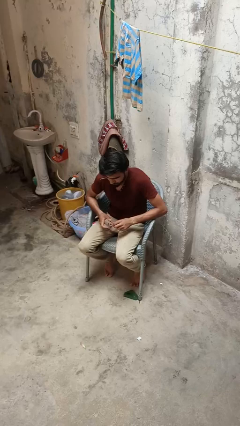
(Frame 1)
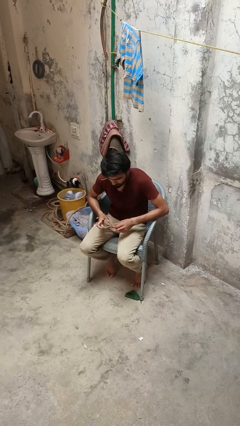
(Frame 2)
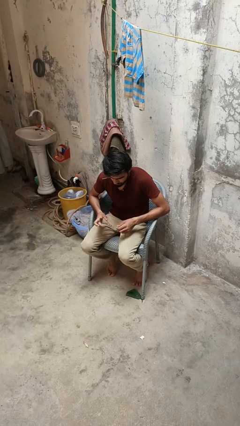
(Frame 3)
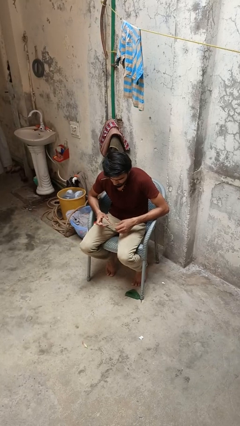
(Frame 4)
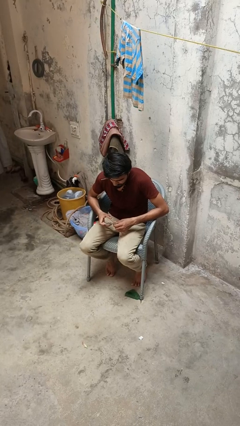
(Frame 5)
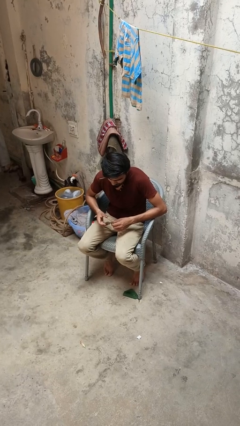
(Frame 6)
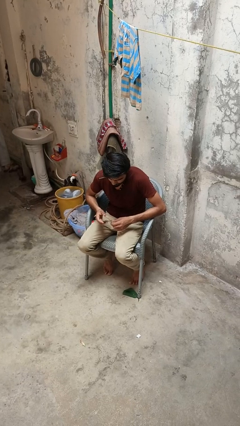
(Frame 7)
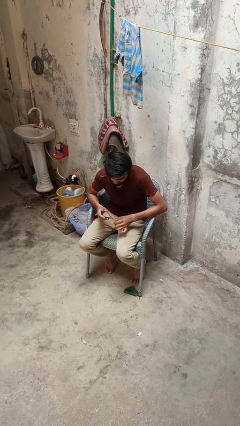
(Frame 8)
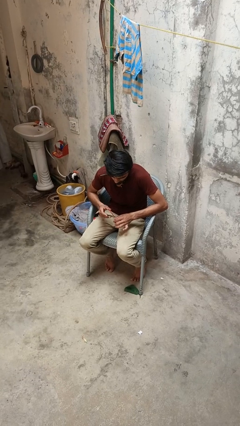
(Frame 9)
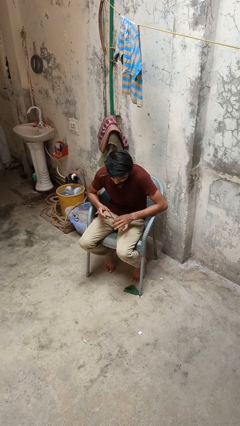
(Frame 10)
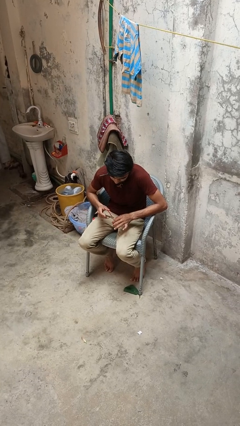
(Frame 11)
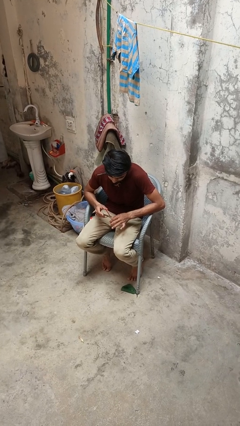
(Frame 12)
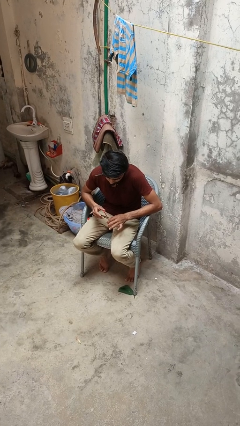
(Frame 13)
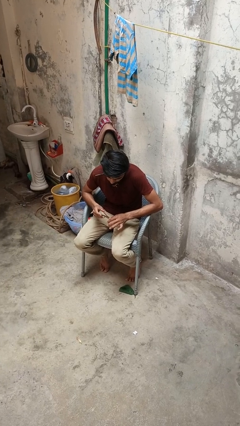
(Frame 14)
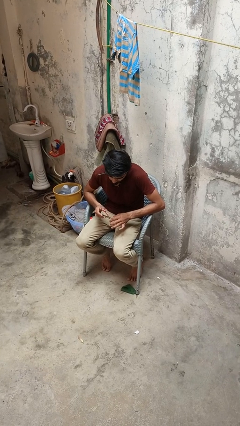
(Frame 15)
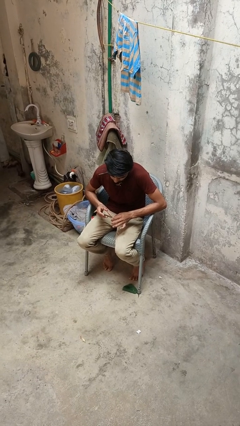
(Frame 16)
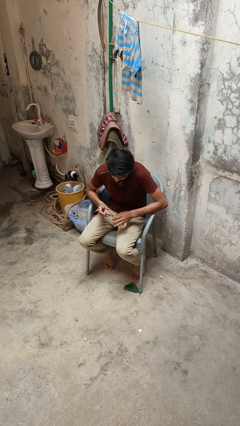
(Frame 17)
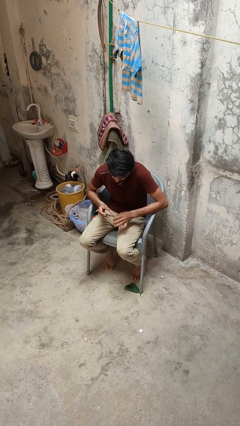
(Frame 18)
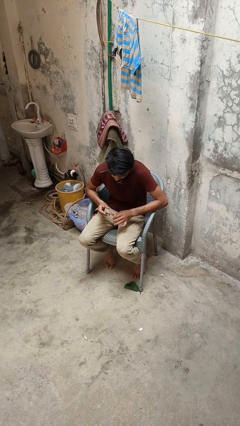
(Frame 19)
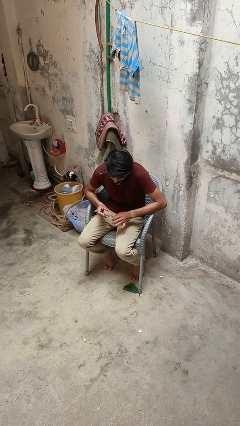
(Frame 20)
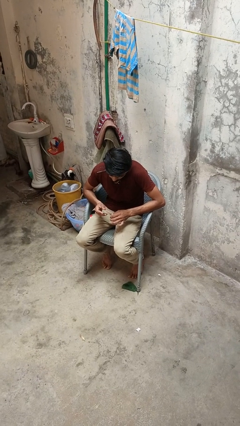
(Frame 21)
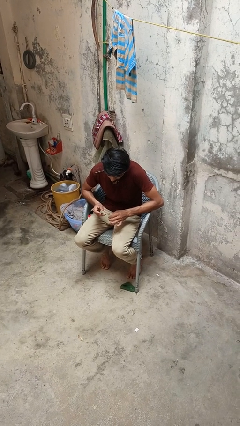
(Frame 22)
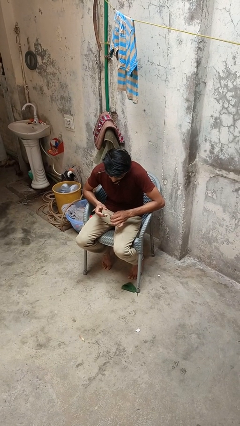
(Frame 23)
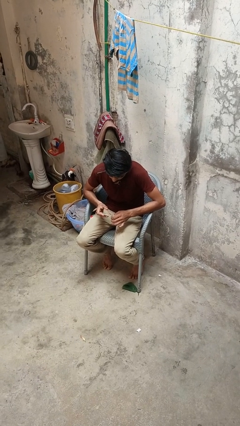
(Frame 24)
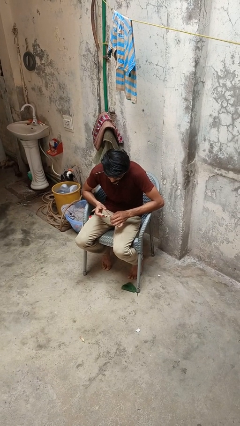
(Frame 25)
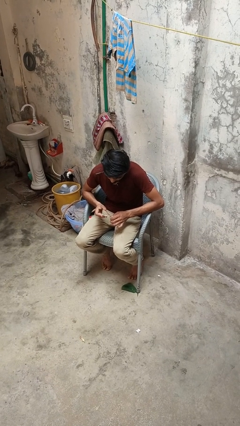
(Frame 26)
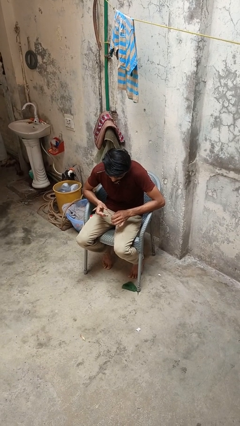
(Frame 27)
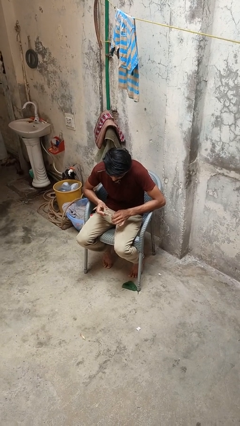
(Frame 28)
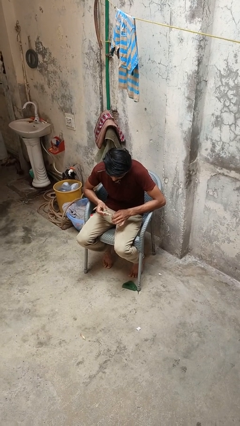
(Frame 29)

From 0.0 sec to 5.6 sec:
person clips fingernails

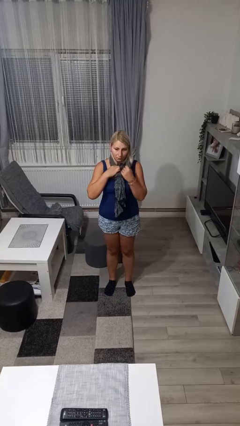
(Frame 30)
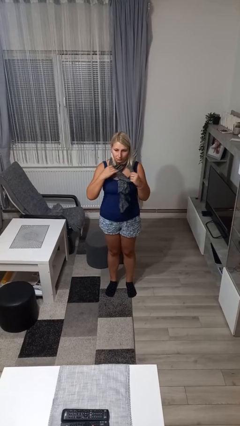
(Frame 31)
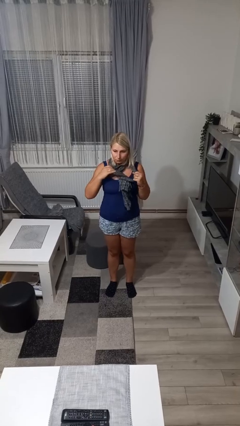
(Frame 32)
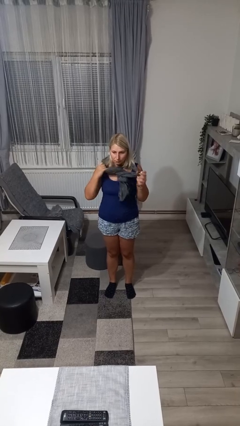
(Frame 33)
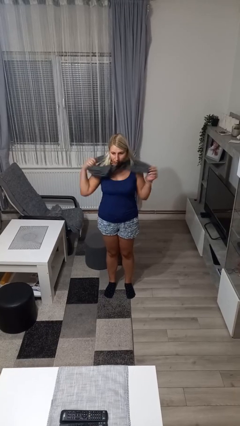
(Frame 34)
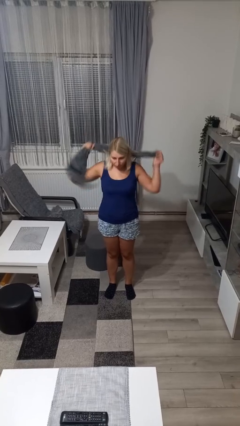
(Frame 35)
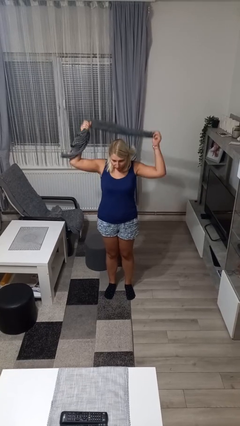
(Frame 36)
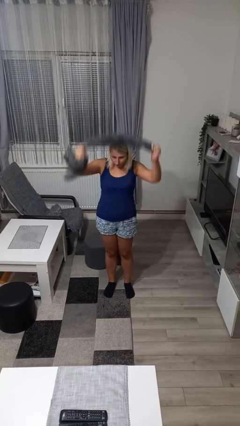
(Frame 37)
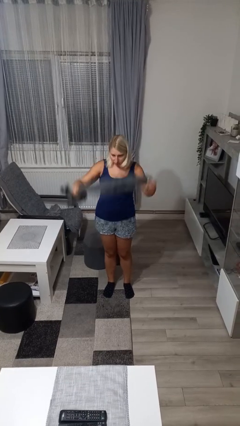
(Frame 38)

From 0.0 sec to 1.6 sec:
person takes off scarf

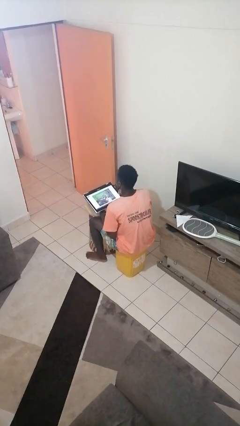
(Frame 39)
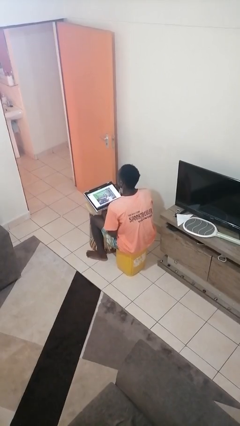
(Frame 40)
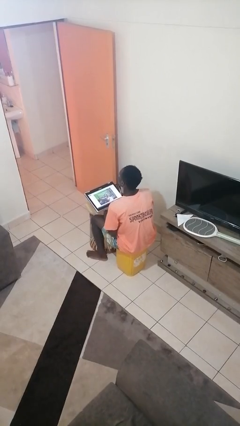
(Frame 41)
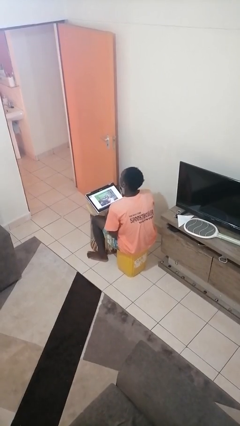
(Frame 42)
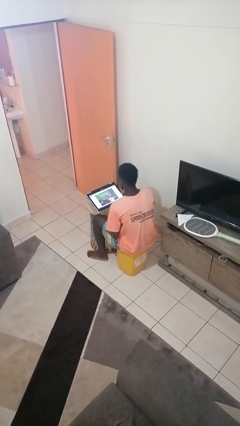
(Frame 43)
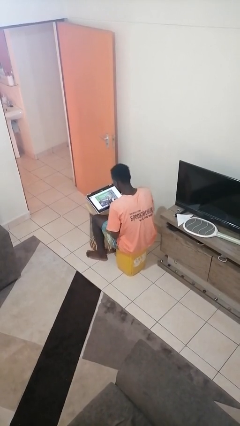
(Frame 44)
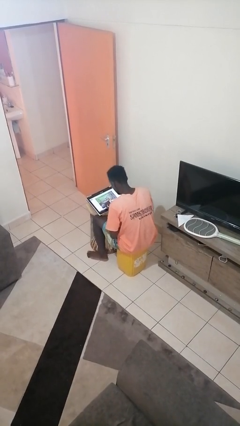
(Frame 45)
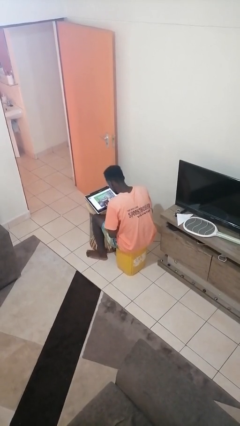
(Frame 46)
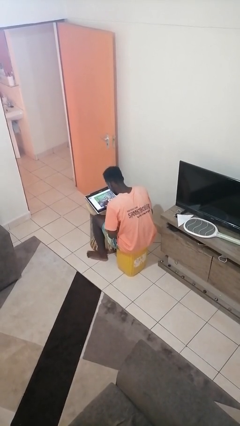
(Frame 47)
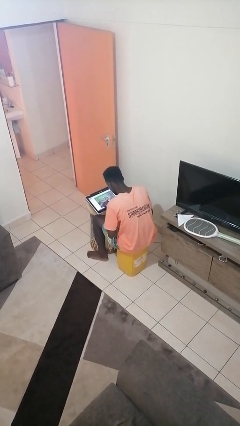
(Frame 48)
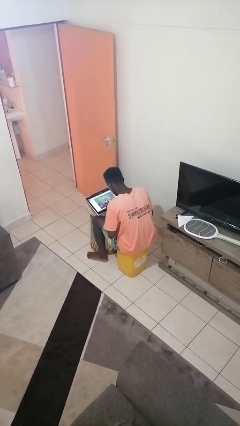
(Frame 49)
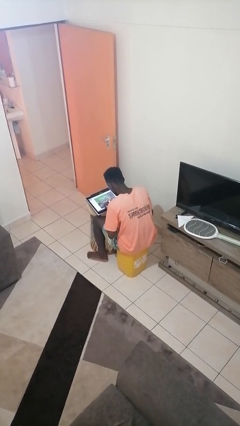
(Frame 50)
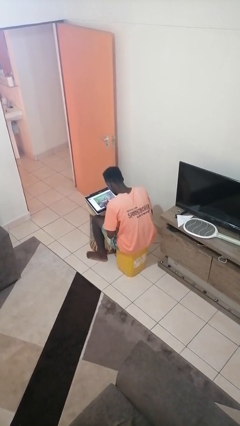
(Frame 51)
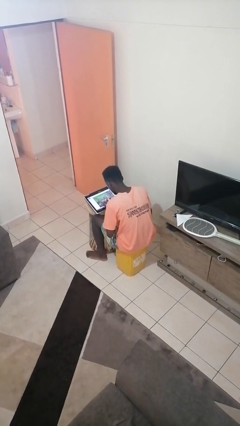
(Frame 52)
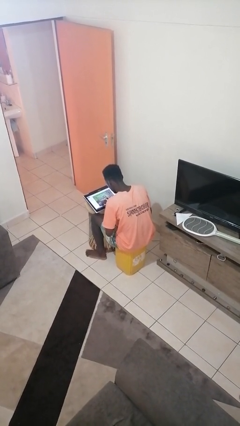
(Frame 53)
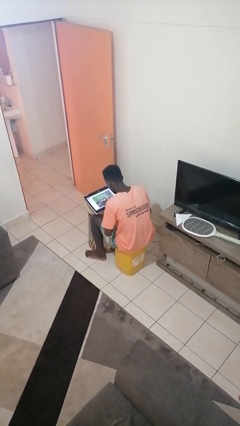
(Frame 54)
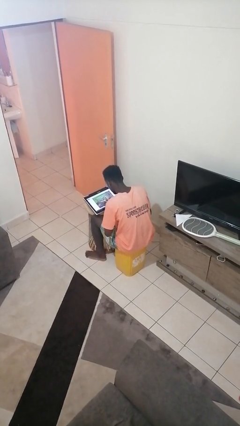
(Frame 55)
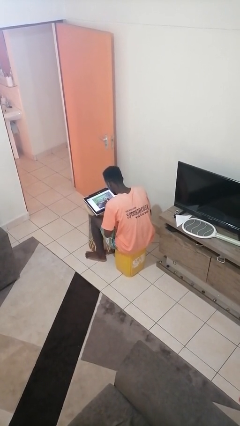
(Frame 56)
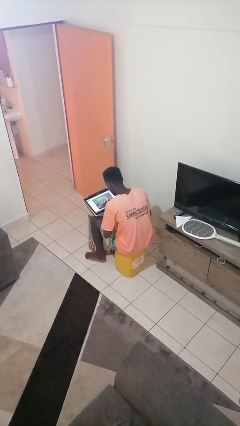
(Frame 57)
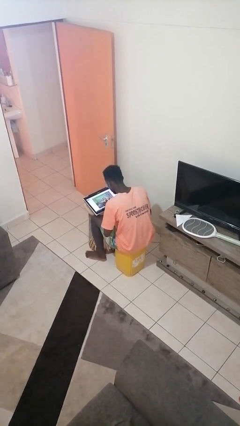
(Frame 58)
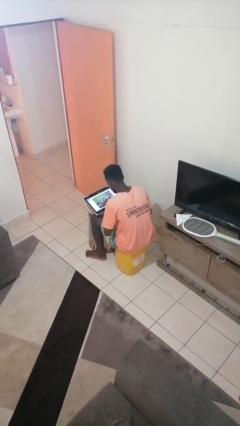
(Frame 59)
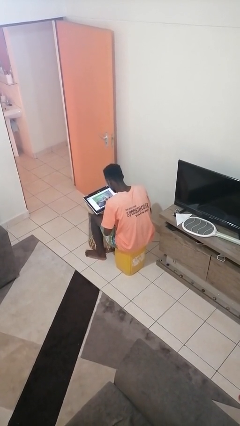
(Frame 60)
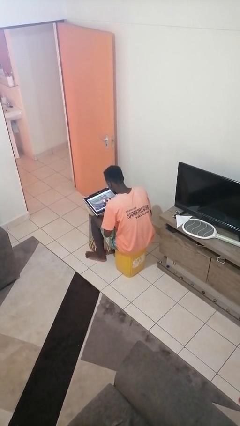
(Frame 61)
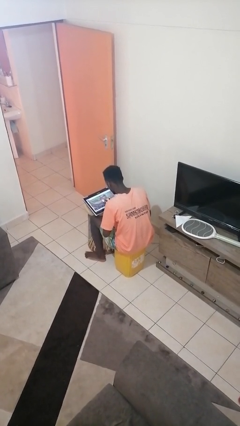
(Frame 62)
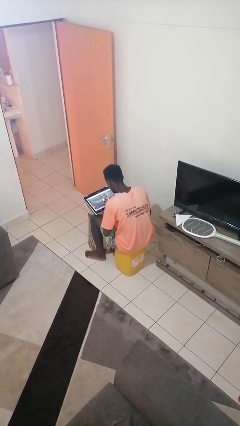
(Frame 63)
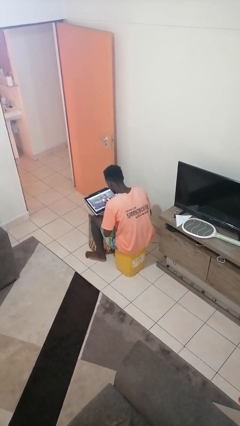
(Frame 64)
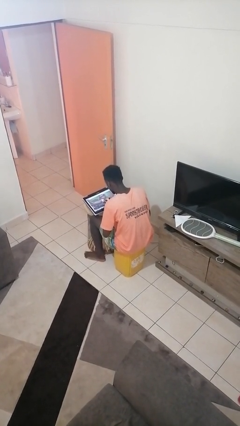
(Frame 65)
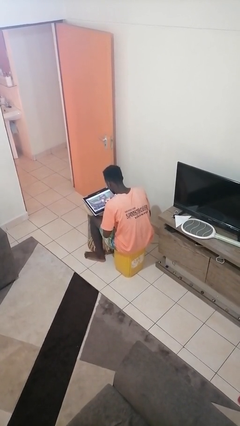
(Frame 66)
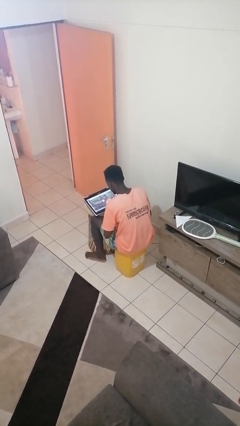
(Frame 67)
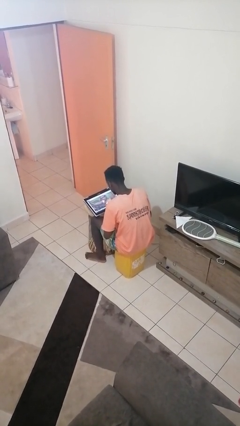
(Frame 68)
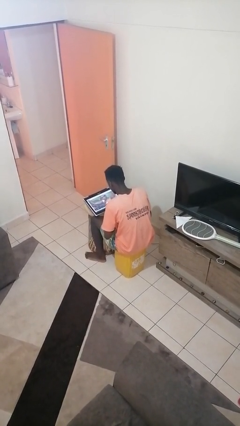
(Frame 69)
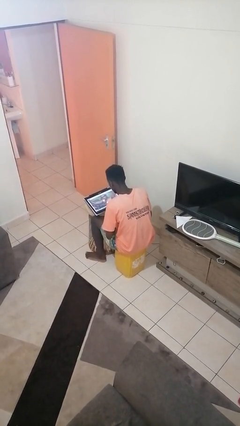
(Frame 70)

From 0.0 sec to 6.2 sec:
person interacts with tablet

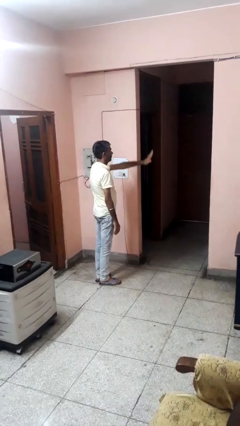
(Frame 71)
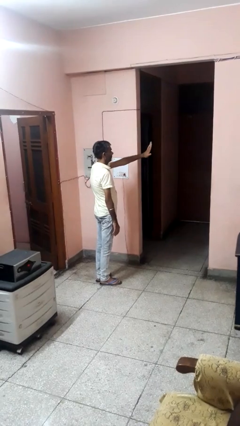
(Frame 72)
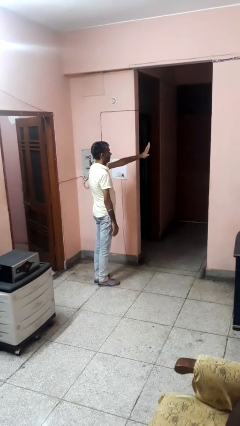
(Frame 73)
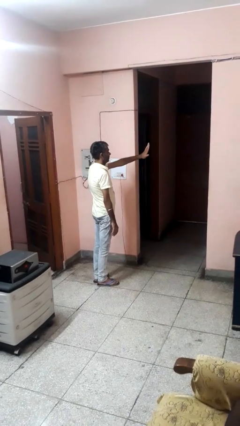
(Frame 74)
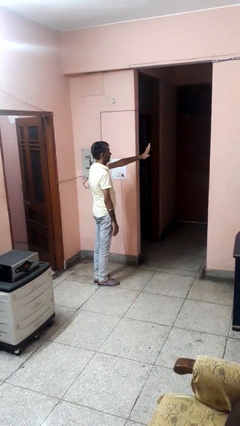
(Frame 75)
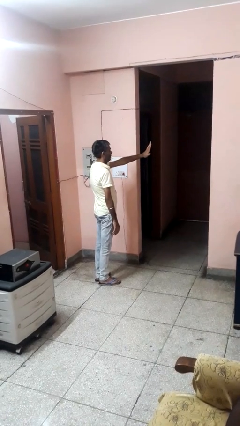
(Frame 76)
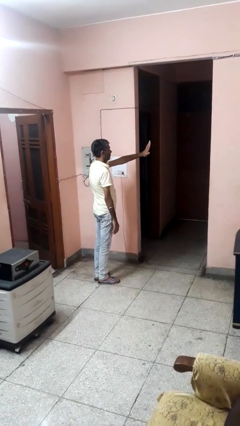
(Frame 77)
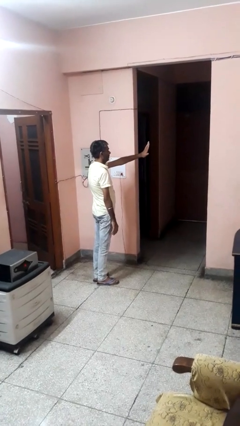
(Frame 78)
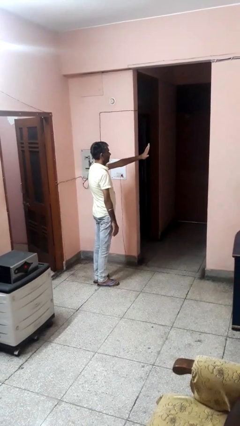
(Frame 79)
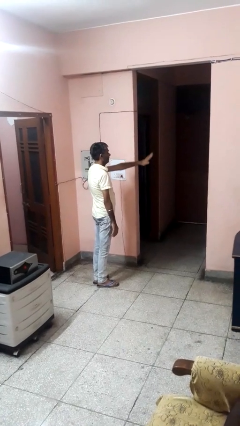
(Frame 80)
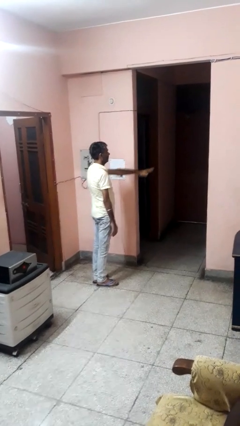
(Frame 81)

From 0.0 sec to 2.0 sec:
person gestures stop

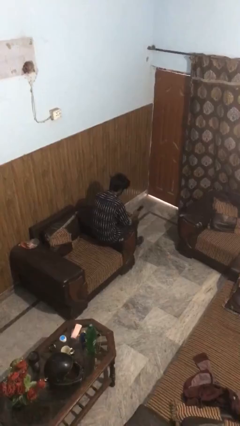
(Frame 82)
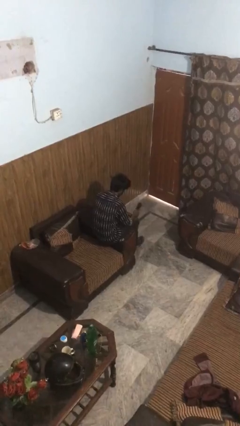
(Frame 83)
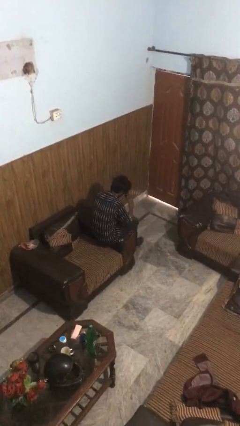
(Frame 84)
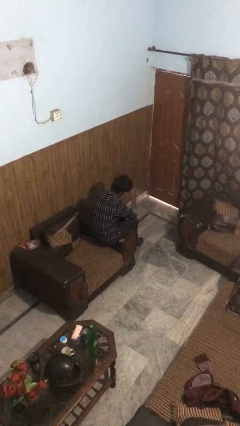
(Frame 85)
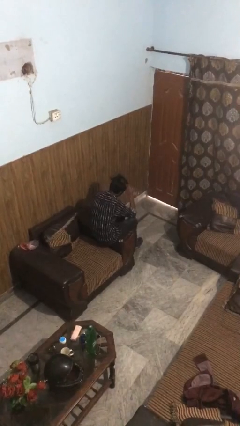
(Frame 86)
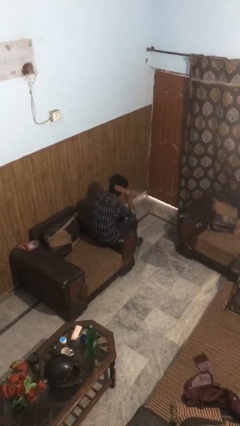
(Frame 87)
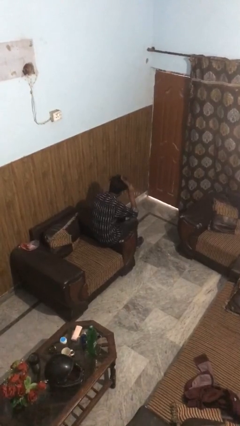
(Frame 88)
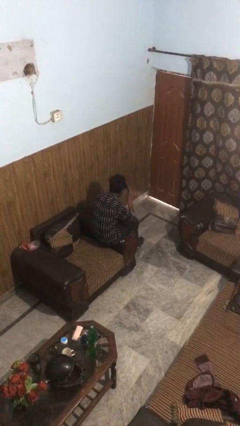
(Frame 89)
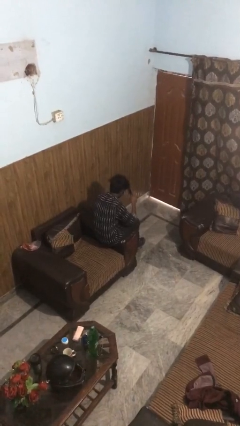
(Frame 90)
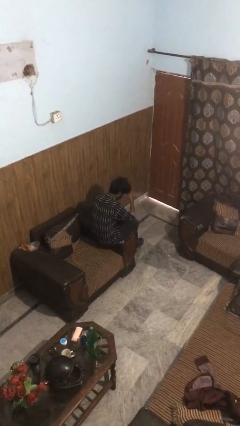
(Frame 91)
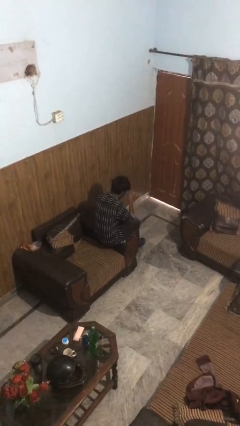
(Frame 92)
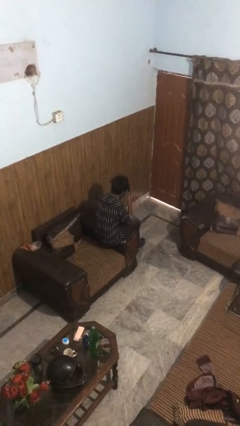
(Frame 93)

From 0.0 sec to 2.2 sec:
person brushes hair
